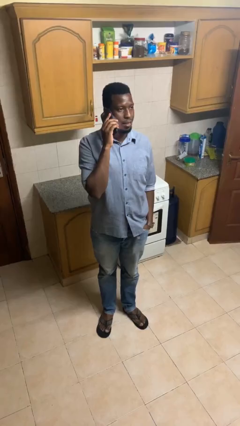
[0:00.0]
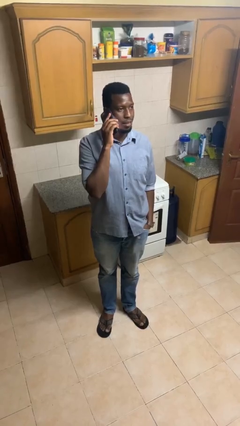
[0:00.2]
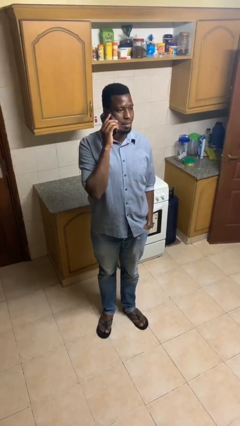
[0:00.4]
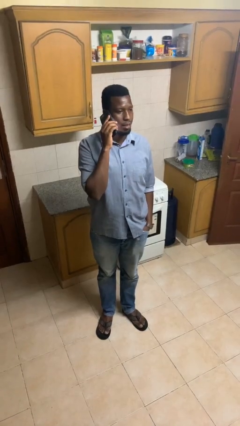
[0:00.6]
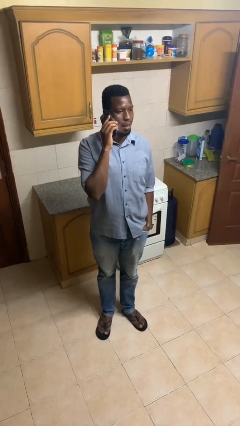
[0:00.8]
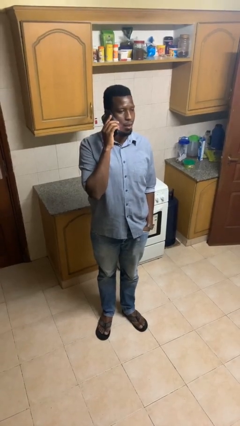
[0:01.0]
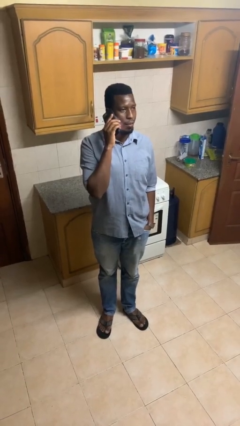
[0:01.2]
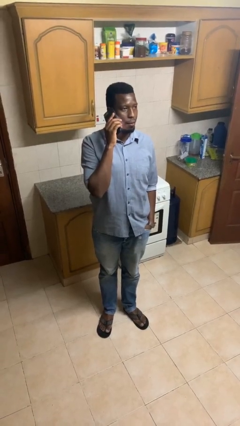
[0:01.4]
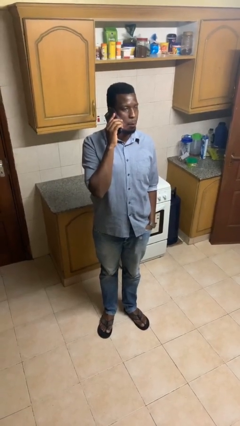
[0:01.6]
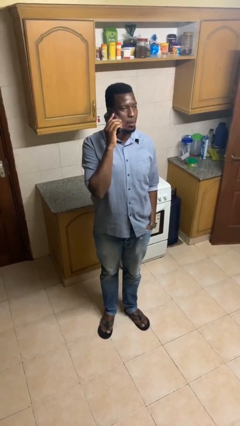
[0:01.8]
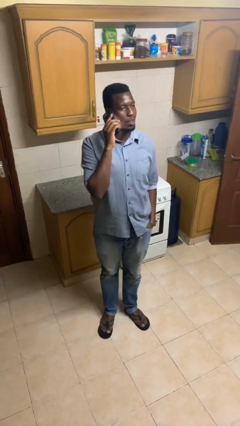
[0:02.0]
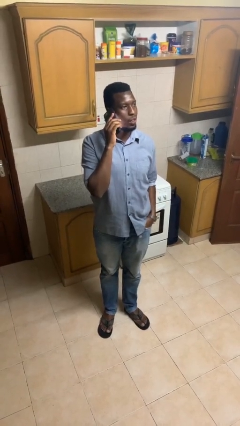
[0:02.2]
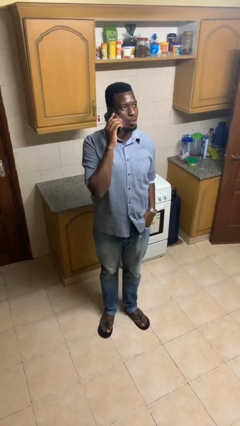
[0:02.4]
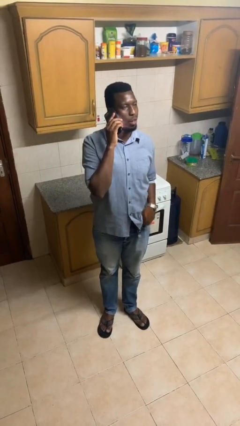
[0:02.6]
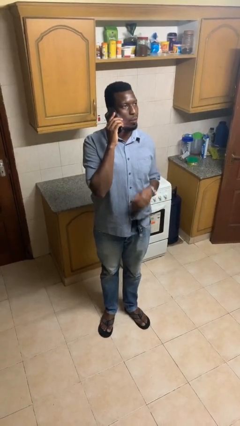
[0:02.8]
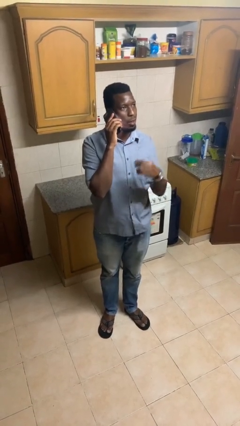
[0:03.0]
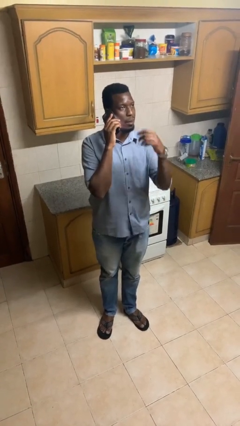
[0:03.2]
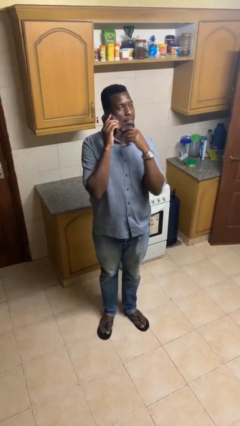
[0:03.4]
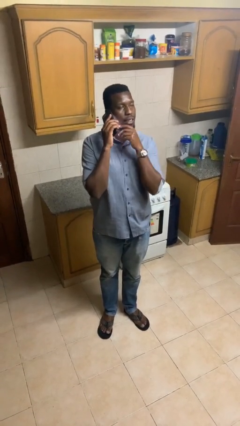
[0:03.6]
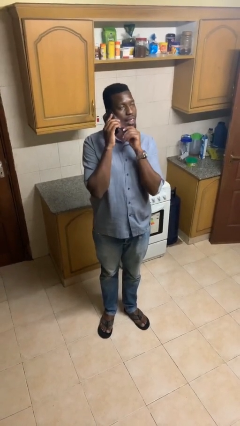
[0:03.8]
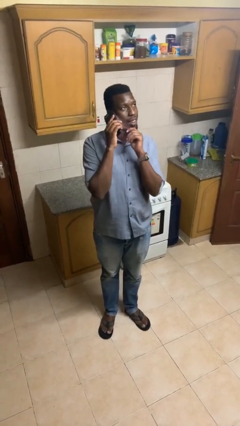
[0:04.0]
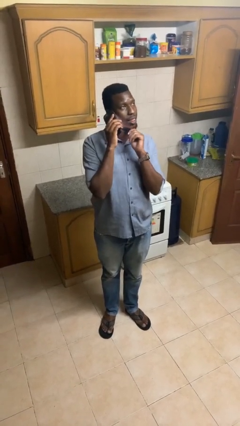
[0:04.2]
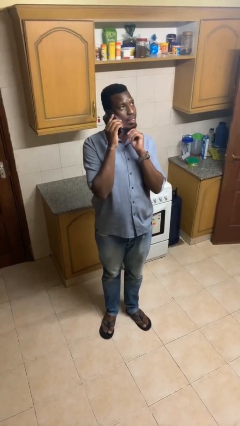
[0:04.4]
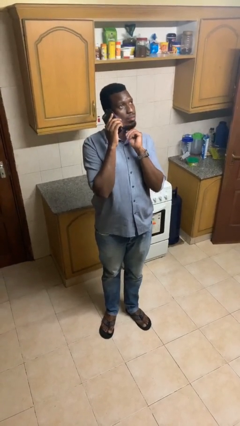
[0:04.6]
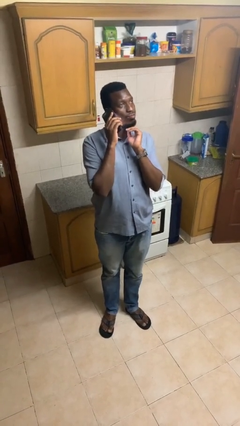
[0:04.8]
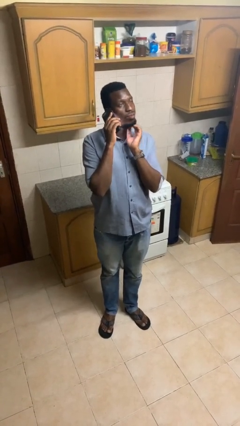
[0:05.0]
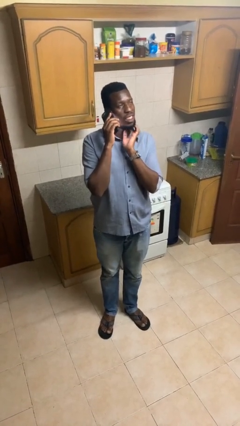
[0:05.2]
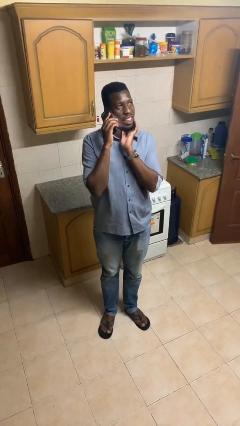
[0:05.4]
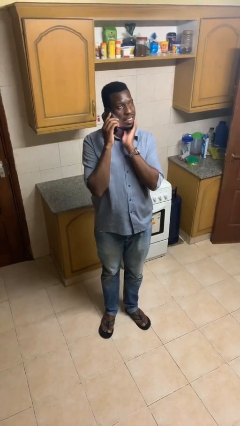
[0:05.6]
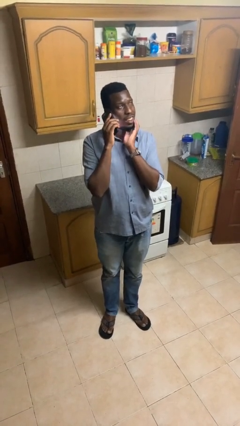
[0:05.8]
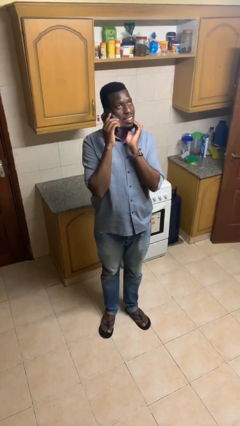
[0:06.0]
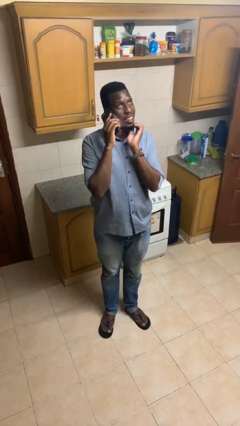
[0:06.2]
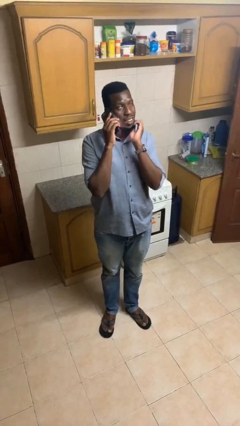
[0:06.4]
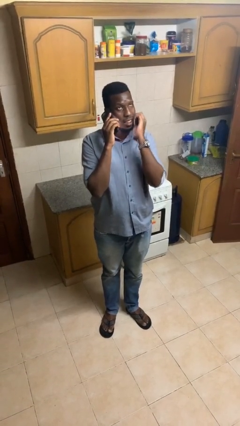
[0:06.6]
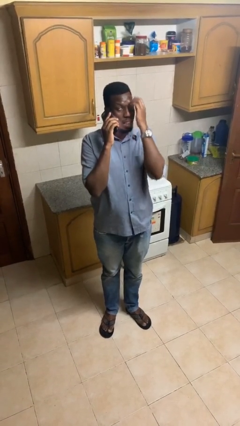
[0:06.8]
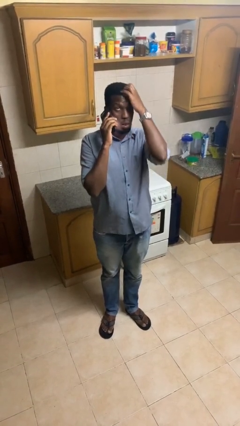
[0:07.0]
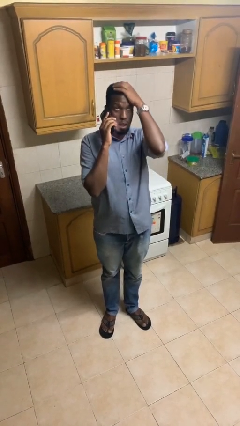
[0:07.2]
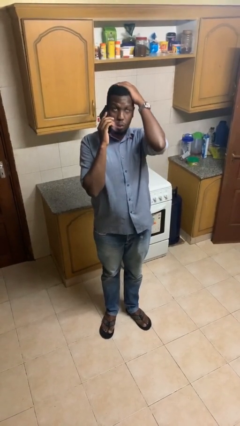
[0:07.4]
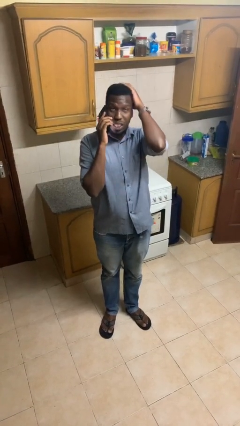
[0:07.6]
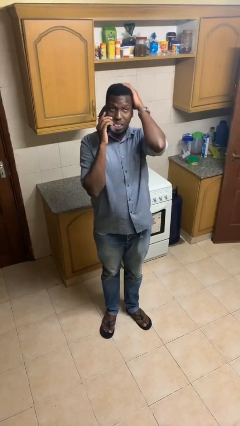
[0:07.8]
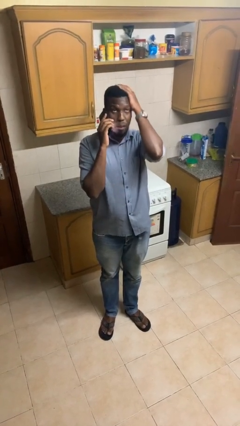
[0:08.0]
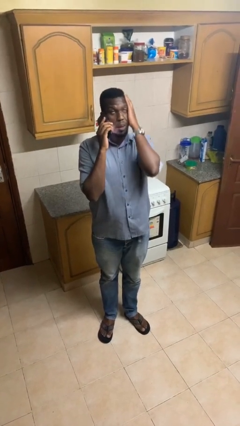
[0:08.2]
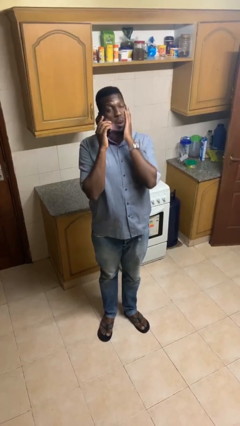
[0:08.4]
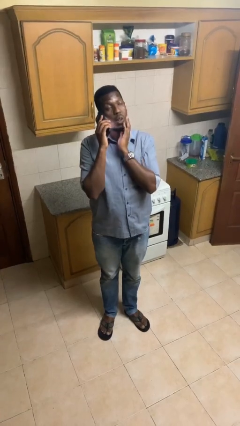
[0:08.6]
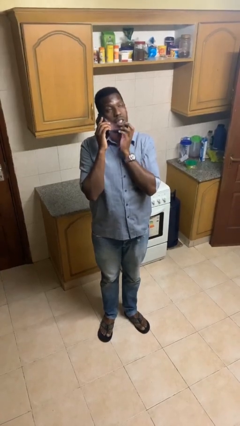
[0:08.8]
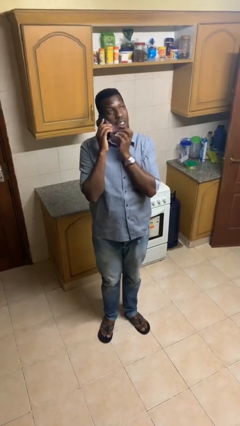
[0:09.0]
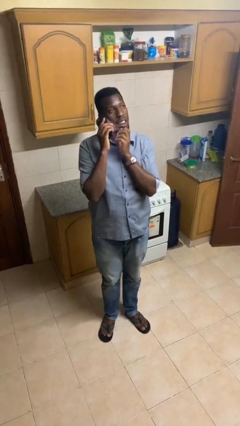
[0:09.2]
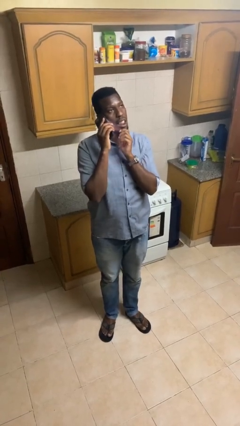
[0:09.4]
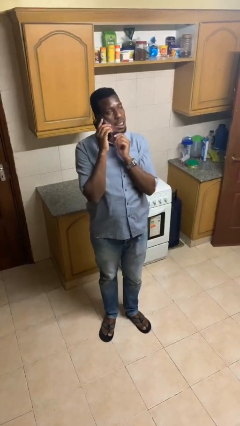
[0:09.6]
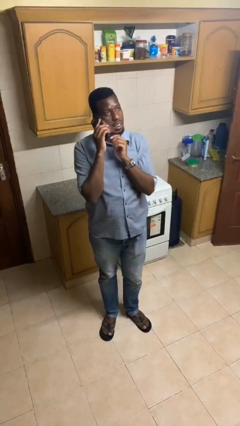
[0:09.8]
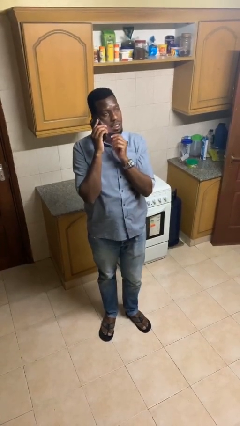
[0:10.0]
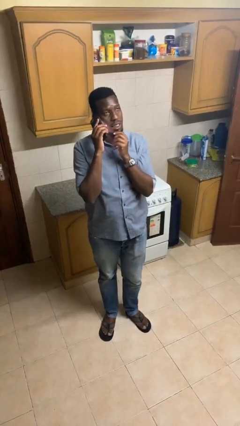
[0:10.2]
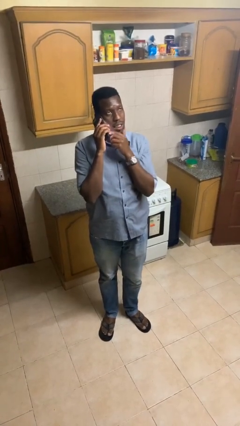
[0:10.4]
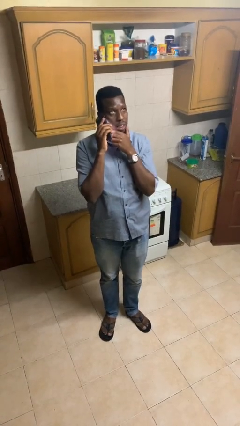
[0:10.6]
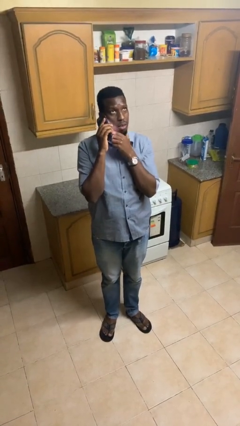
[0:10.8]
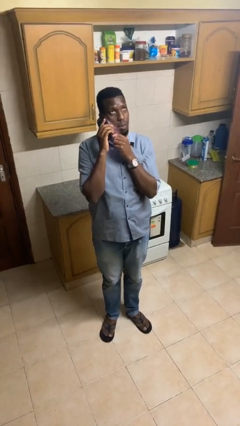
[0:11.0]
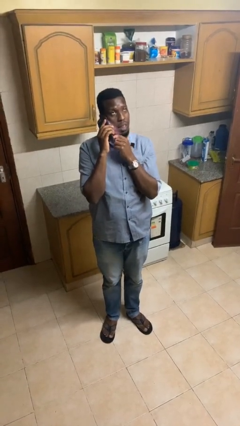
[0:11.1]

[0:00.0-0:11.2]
person talks on phone

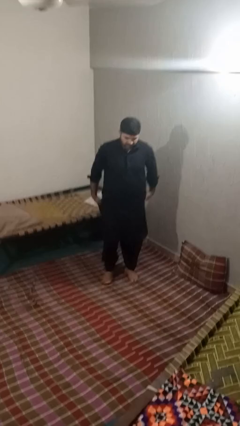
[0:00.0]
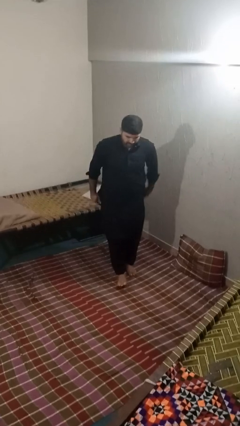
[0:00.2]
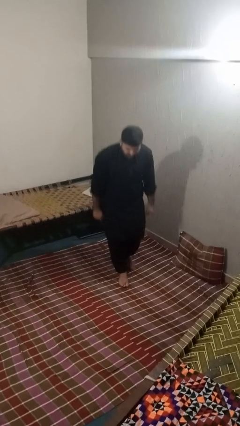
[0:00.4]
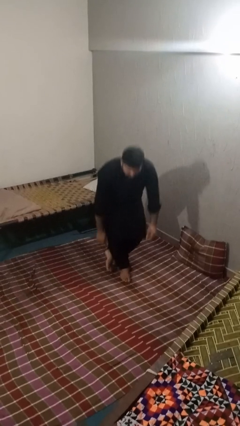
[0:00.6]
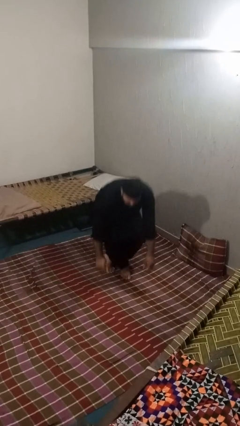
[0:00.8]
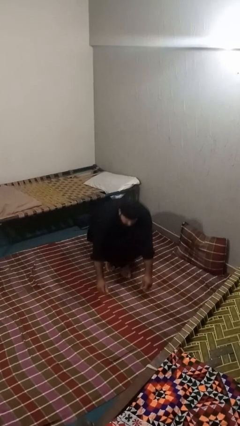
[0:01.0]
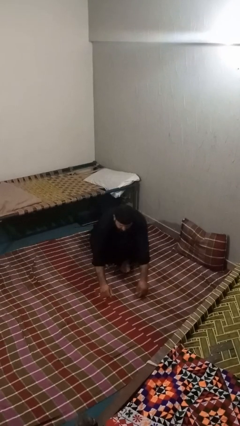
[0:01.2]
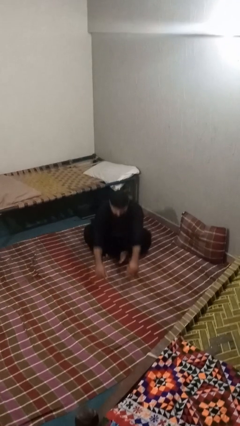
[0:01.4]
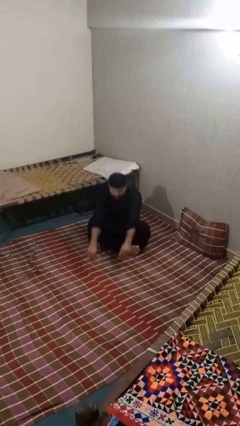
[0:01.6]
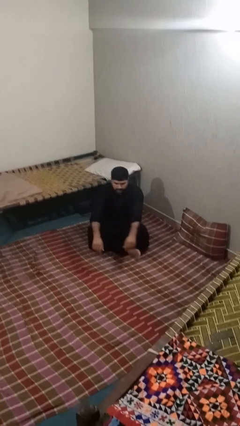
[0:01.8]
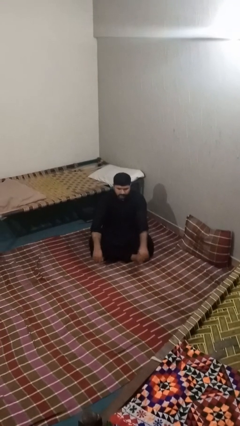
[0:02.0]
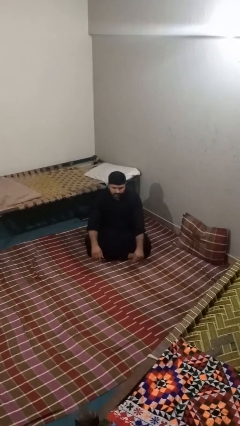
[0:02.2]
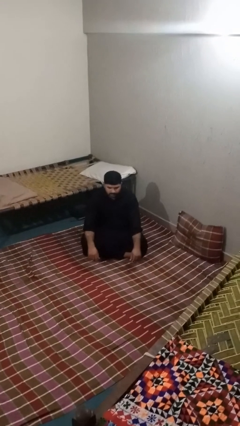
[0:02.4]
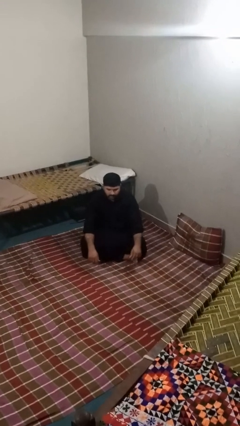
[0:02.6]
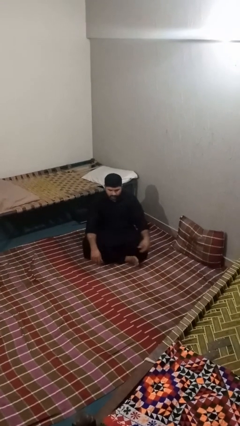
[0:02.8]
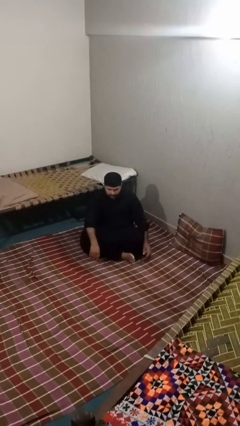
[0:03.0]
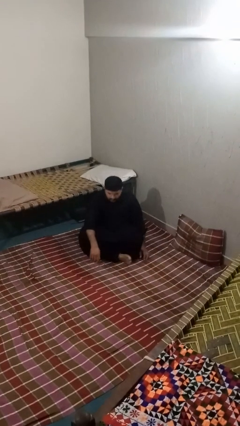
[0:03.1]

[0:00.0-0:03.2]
person sits crisscross

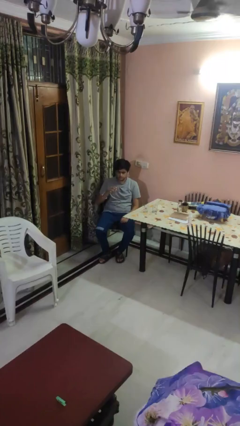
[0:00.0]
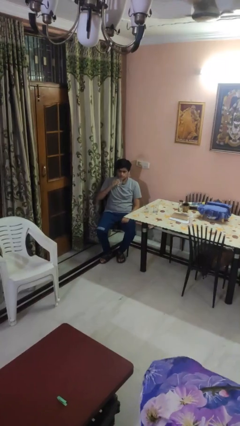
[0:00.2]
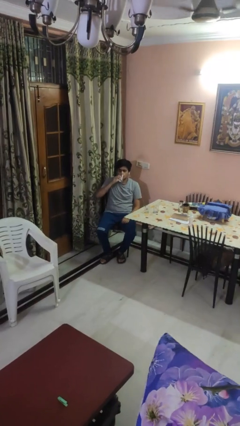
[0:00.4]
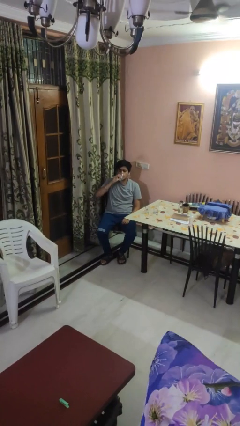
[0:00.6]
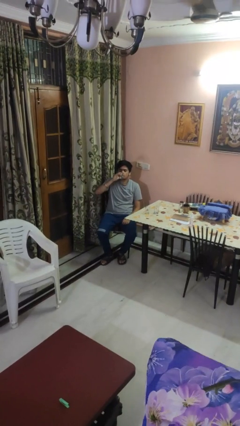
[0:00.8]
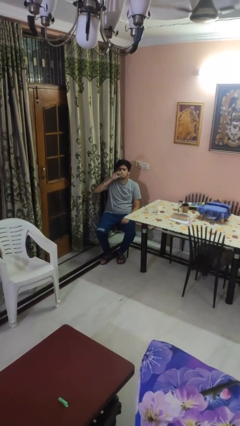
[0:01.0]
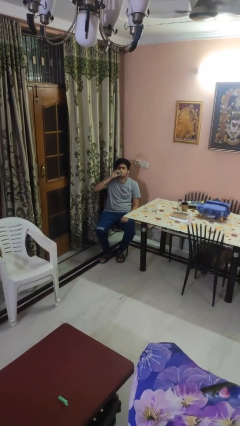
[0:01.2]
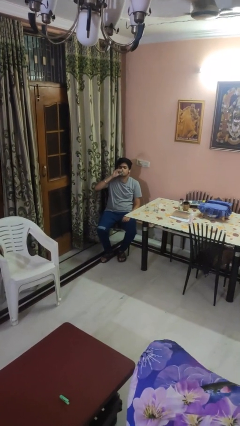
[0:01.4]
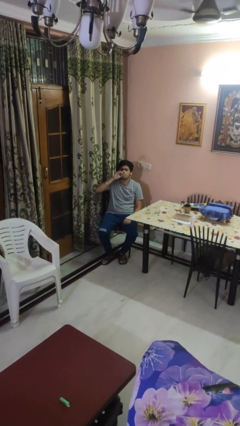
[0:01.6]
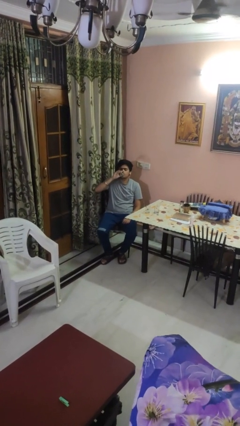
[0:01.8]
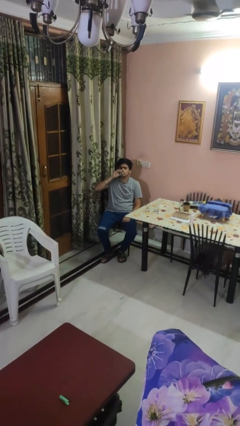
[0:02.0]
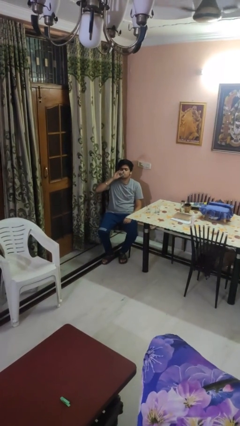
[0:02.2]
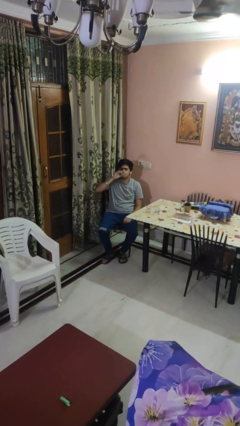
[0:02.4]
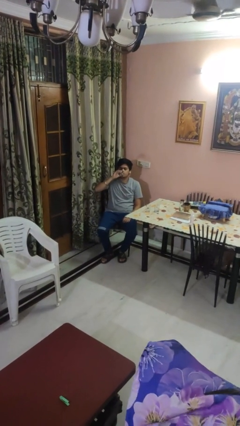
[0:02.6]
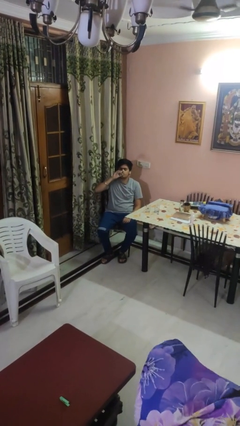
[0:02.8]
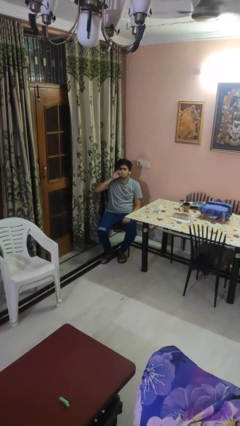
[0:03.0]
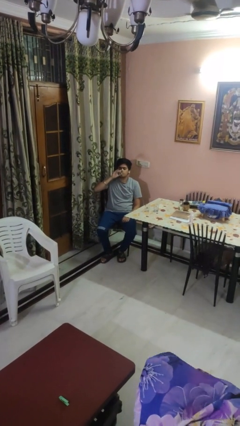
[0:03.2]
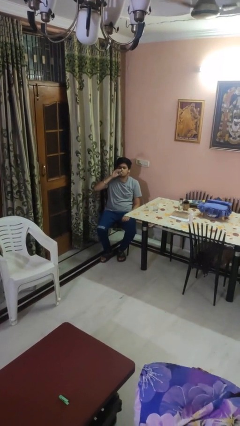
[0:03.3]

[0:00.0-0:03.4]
person drinks from shotglass
